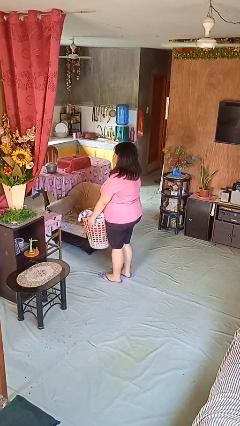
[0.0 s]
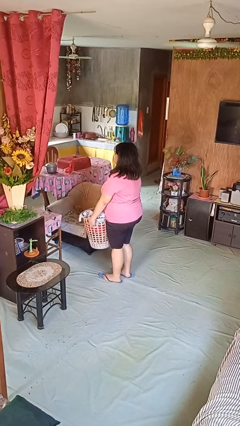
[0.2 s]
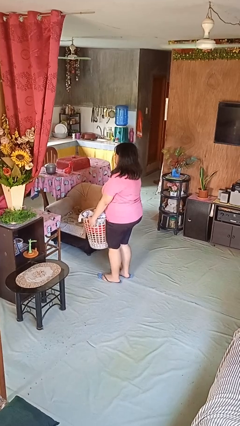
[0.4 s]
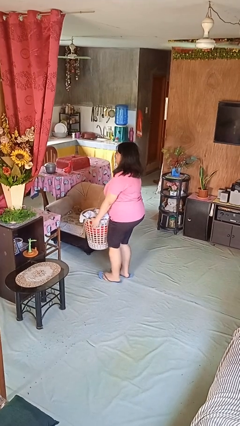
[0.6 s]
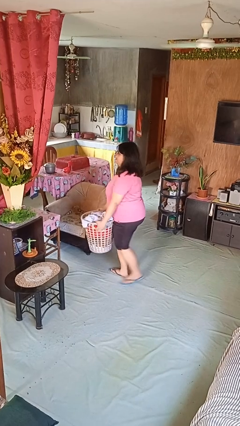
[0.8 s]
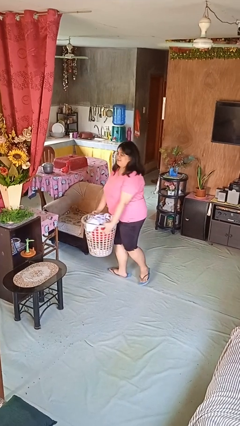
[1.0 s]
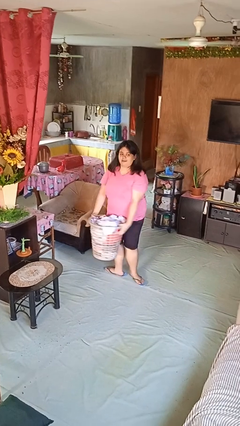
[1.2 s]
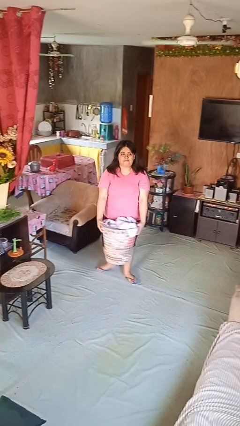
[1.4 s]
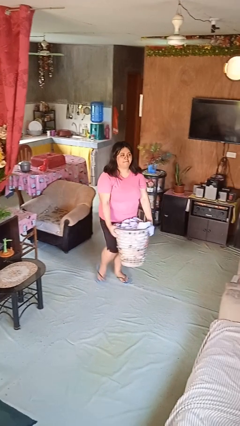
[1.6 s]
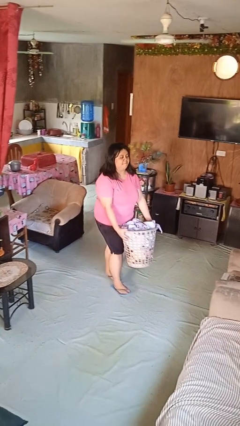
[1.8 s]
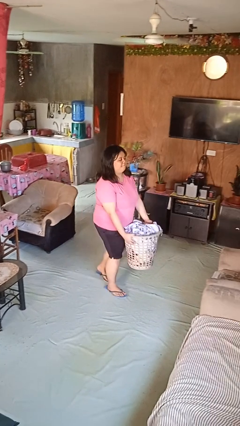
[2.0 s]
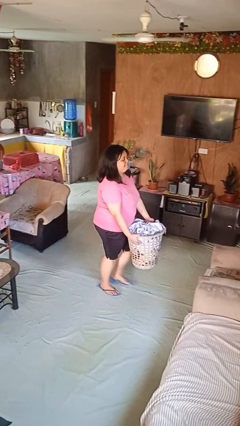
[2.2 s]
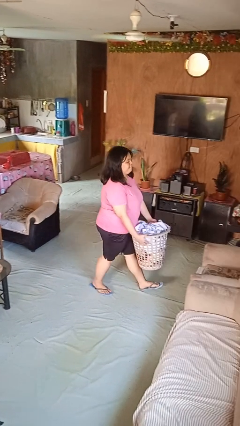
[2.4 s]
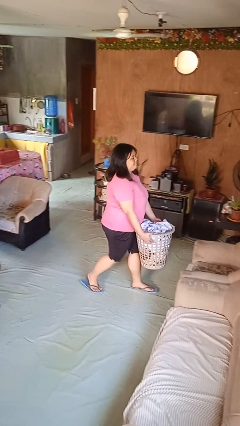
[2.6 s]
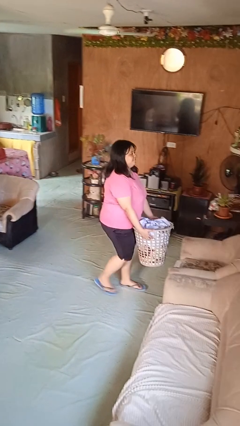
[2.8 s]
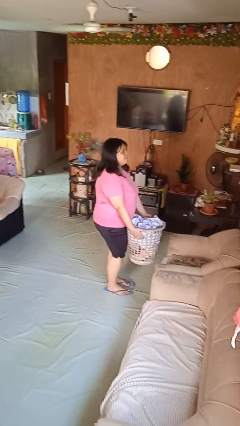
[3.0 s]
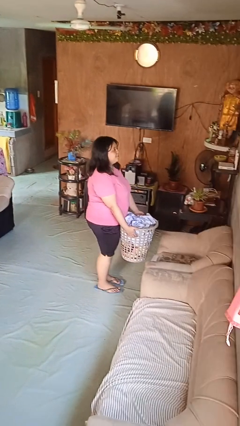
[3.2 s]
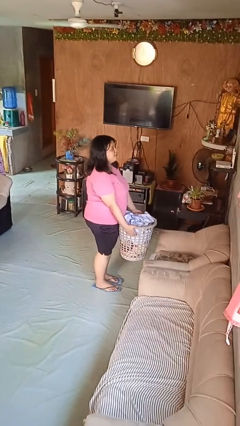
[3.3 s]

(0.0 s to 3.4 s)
person carries laundry basket

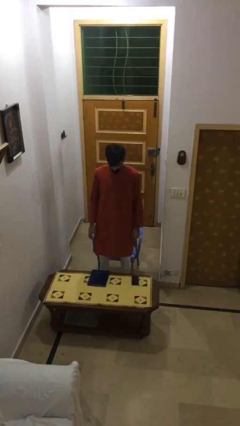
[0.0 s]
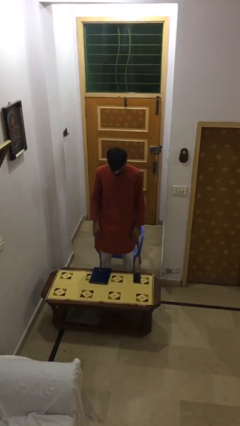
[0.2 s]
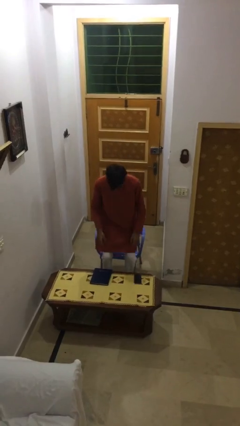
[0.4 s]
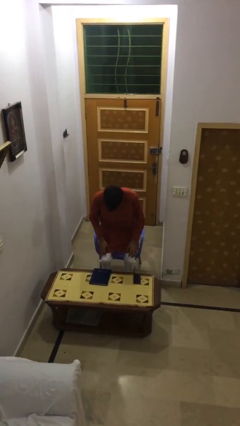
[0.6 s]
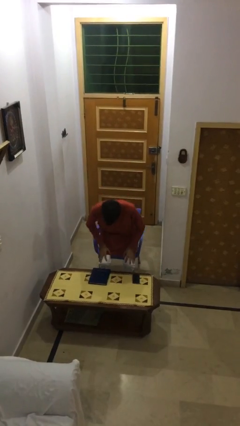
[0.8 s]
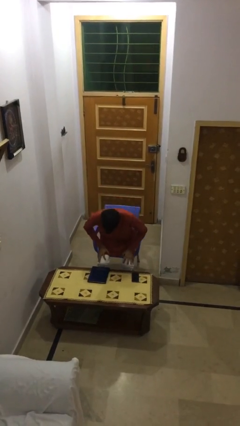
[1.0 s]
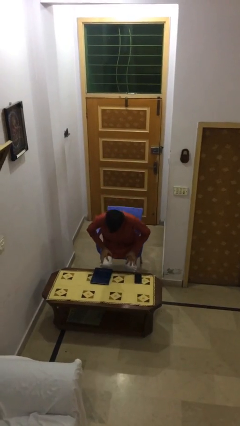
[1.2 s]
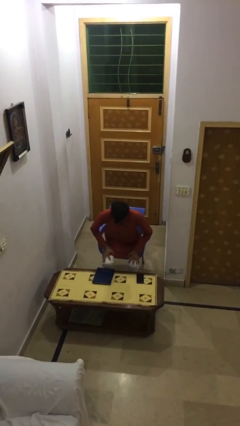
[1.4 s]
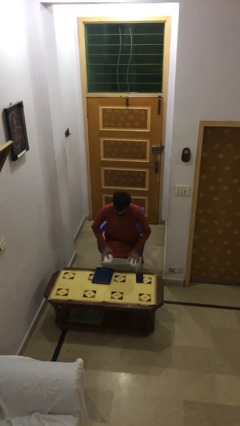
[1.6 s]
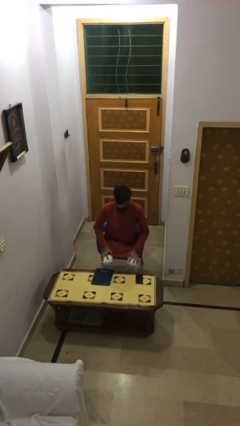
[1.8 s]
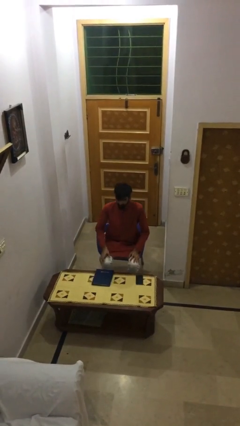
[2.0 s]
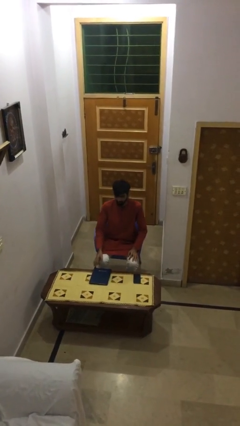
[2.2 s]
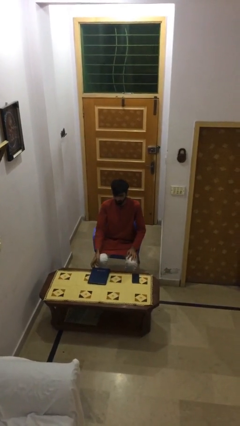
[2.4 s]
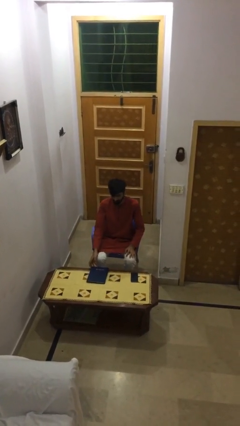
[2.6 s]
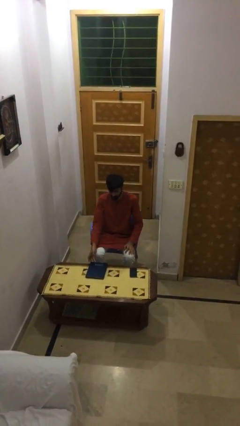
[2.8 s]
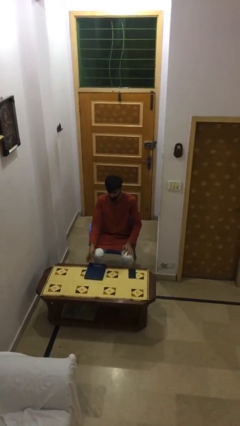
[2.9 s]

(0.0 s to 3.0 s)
person sits down

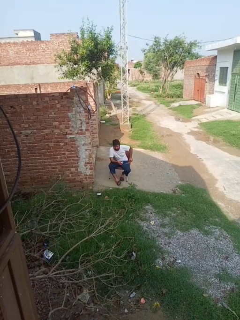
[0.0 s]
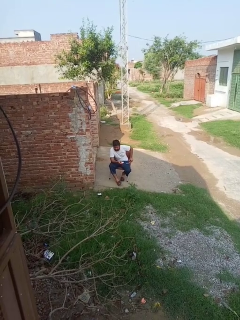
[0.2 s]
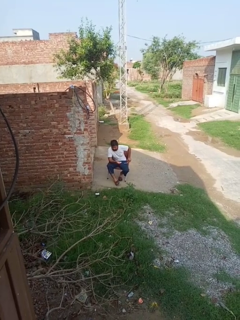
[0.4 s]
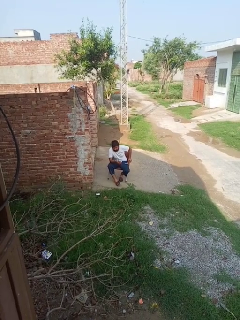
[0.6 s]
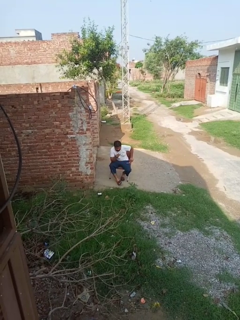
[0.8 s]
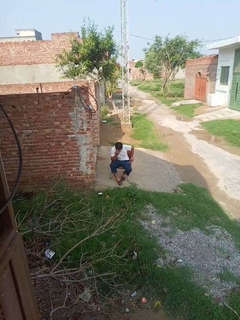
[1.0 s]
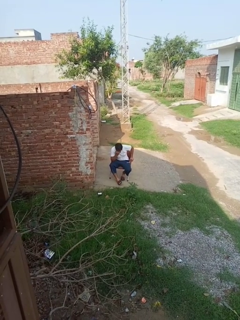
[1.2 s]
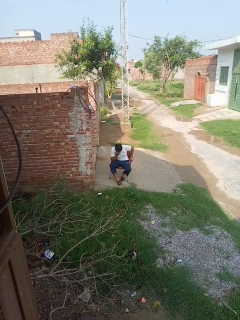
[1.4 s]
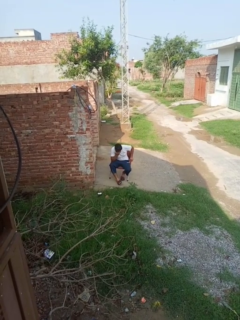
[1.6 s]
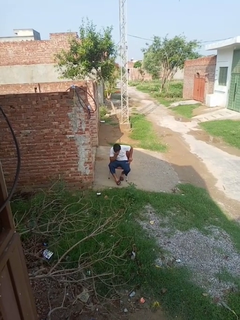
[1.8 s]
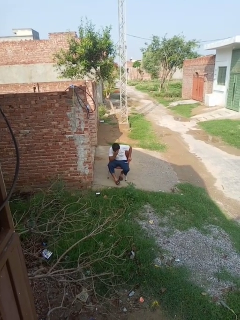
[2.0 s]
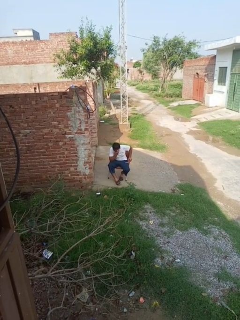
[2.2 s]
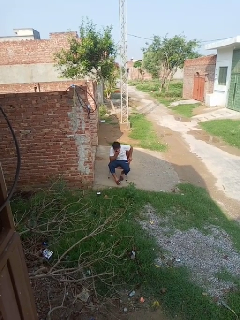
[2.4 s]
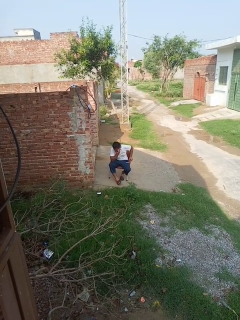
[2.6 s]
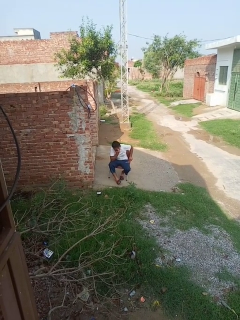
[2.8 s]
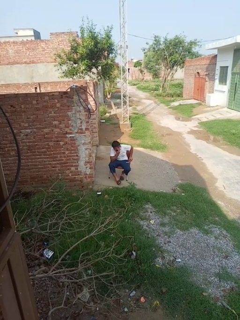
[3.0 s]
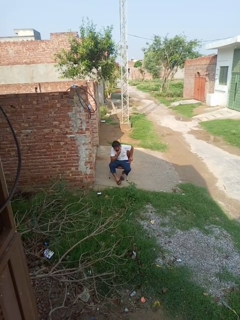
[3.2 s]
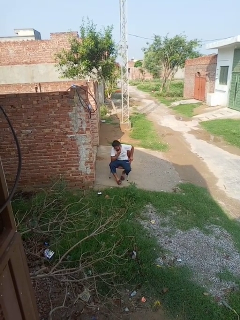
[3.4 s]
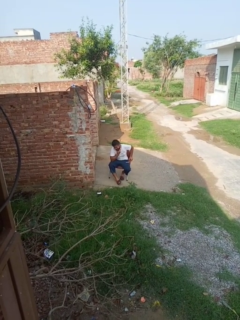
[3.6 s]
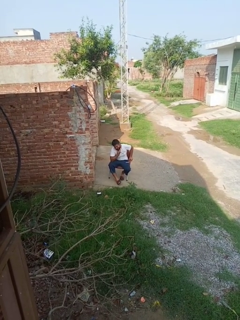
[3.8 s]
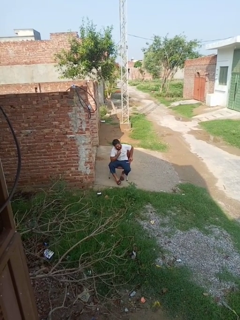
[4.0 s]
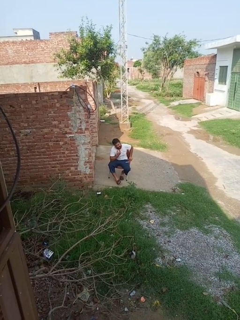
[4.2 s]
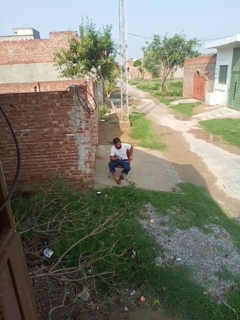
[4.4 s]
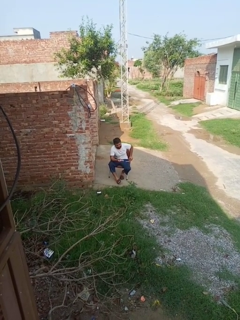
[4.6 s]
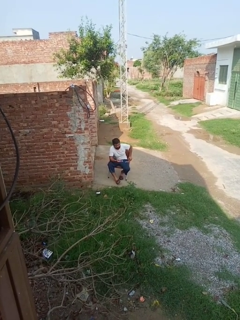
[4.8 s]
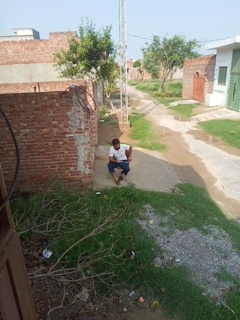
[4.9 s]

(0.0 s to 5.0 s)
person wipes mouth with napkin

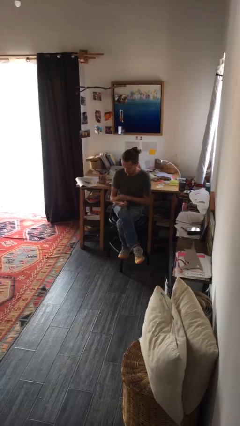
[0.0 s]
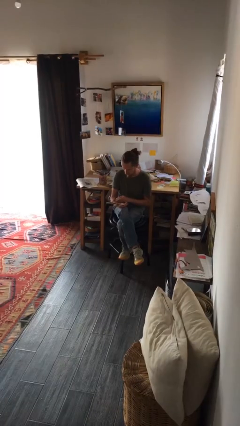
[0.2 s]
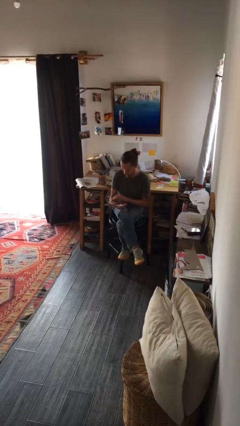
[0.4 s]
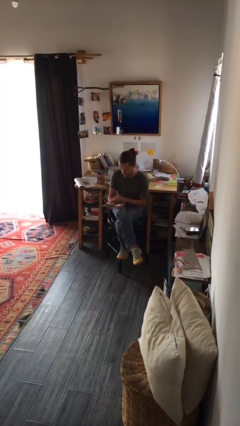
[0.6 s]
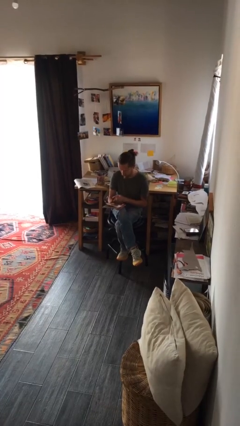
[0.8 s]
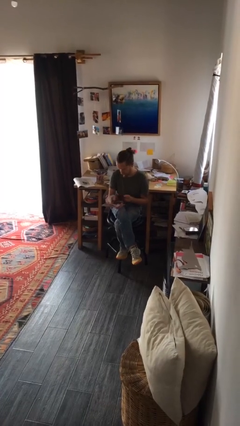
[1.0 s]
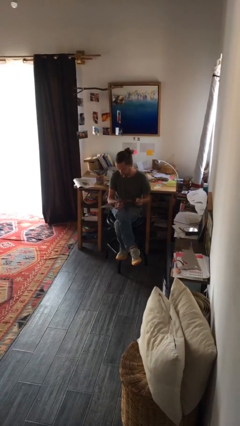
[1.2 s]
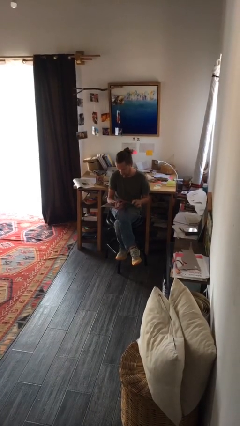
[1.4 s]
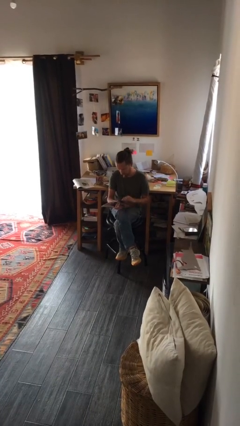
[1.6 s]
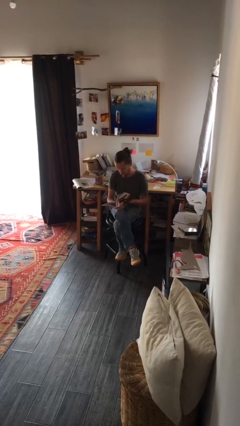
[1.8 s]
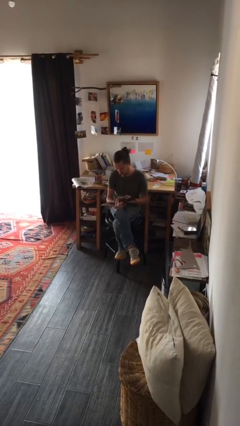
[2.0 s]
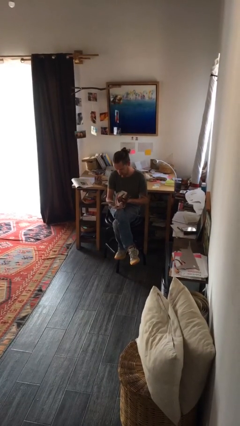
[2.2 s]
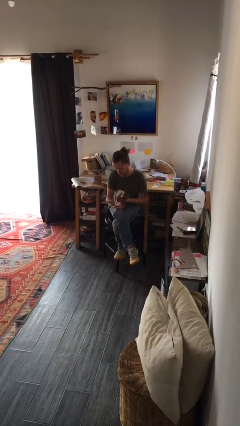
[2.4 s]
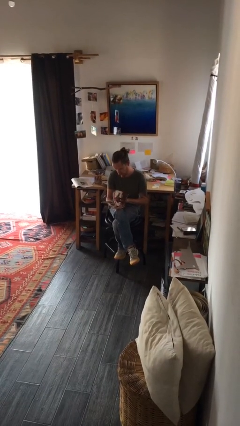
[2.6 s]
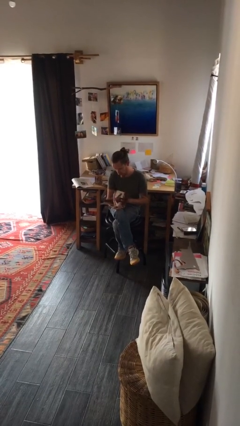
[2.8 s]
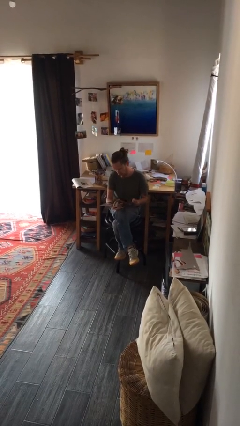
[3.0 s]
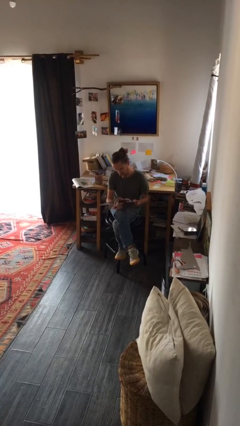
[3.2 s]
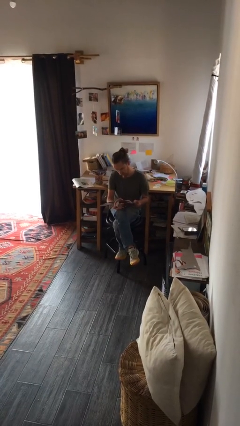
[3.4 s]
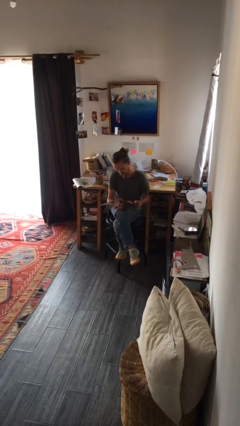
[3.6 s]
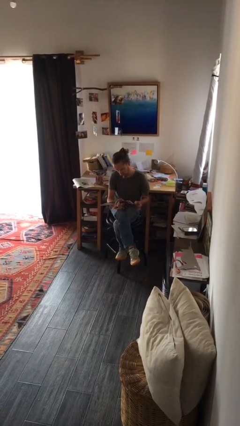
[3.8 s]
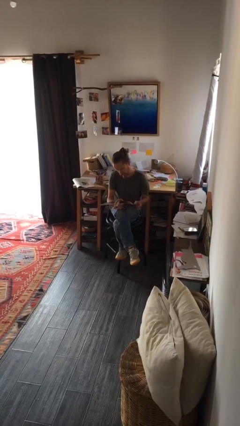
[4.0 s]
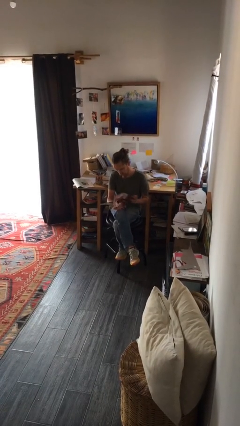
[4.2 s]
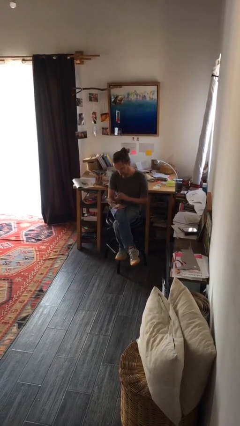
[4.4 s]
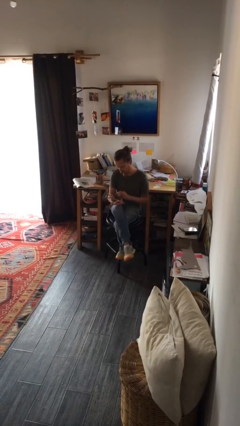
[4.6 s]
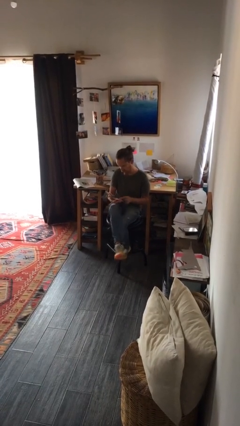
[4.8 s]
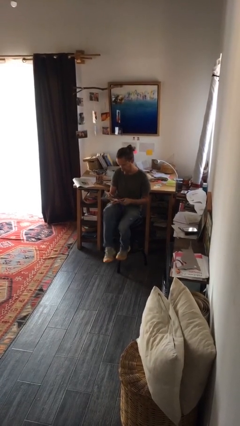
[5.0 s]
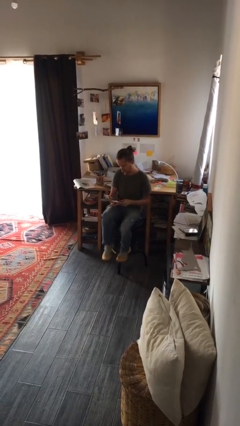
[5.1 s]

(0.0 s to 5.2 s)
person reads magazine

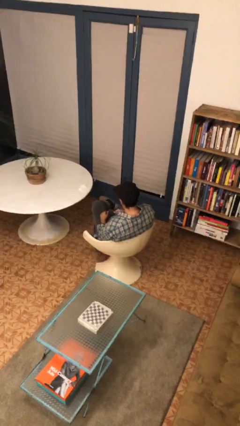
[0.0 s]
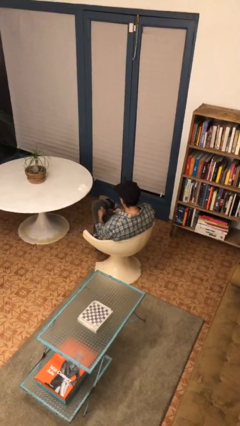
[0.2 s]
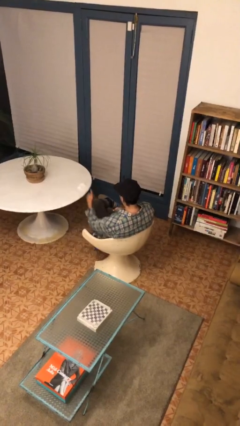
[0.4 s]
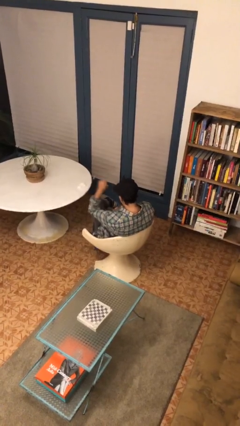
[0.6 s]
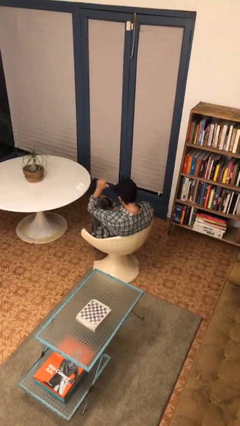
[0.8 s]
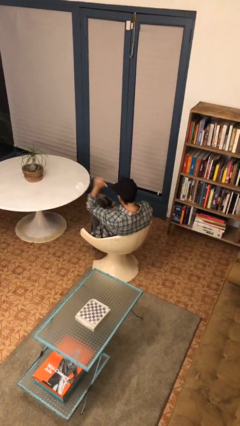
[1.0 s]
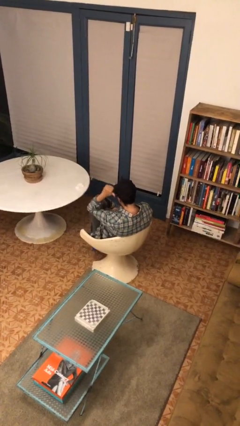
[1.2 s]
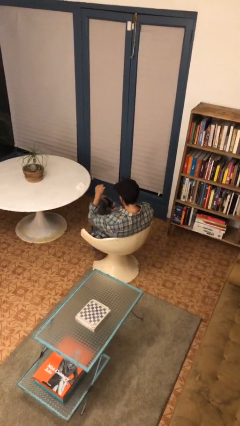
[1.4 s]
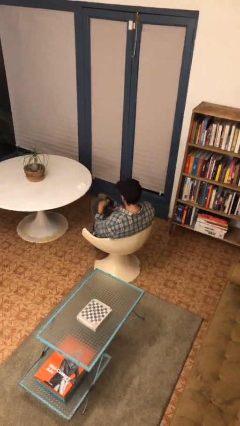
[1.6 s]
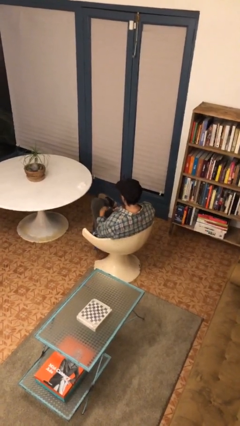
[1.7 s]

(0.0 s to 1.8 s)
person gestures behind me

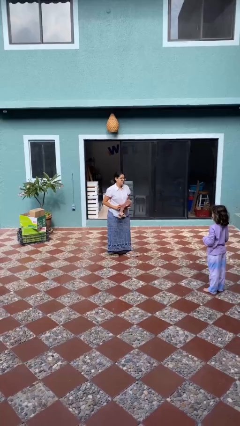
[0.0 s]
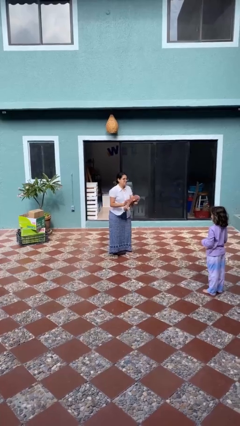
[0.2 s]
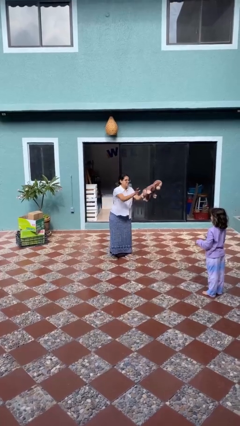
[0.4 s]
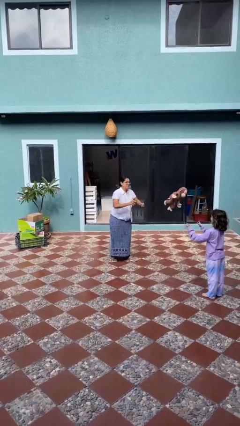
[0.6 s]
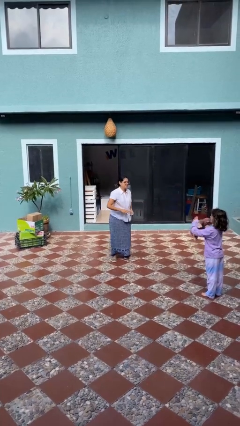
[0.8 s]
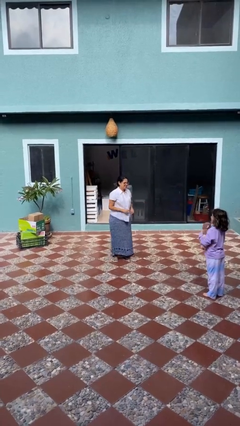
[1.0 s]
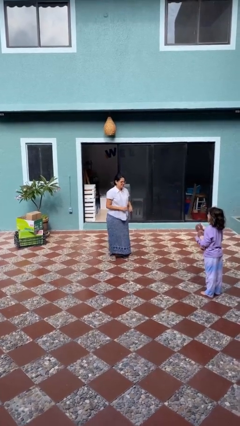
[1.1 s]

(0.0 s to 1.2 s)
person throws object to person
